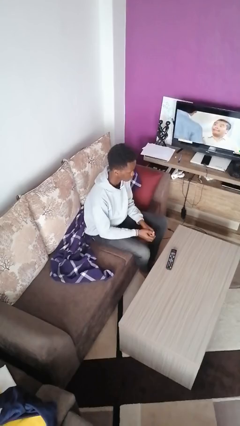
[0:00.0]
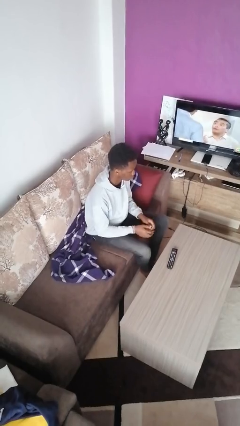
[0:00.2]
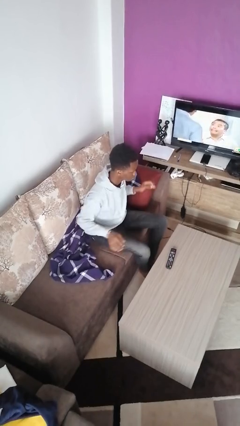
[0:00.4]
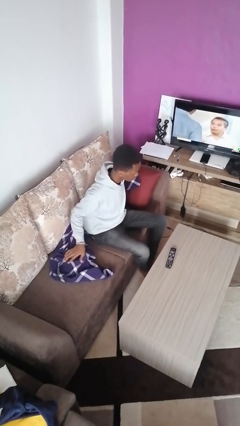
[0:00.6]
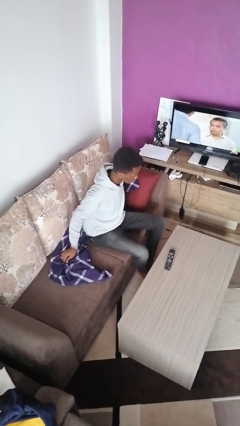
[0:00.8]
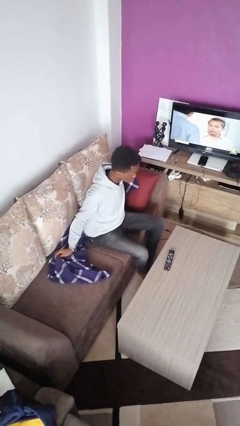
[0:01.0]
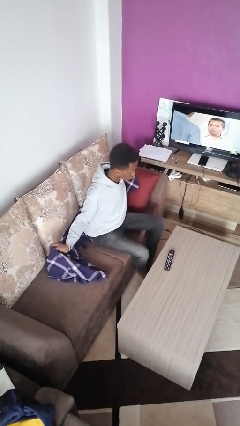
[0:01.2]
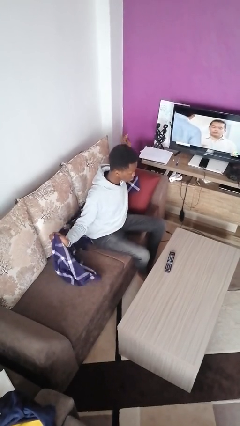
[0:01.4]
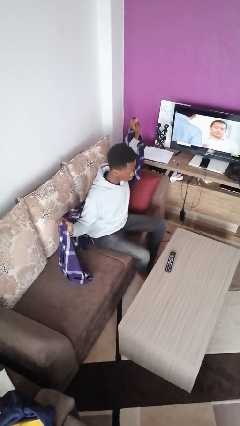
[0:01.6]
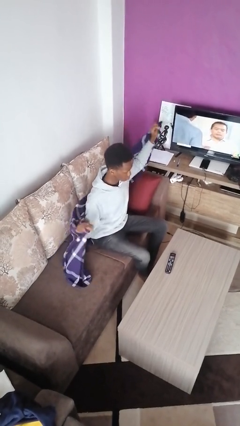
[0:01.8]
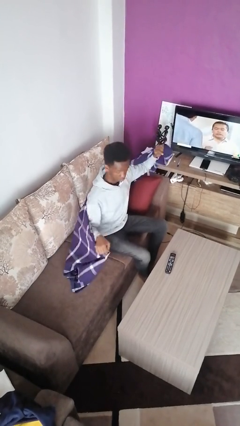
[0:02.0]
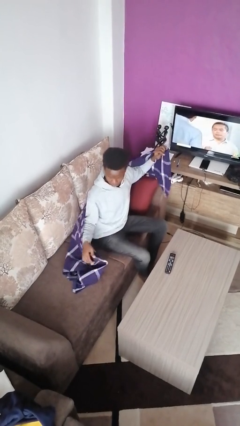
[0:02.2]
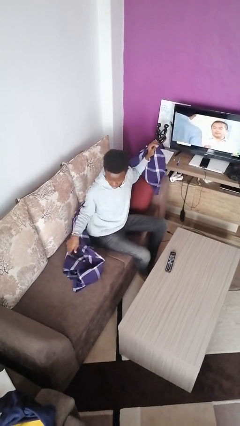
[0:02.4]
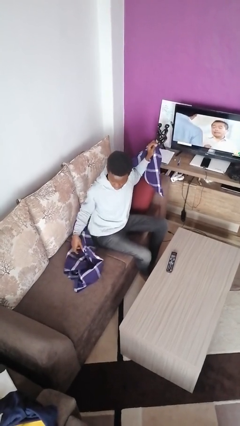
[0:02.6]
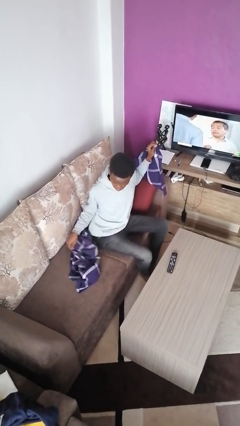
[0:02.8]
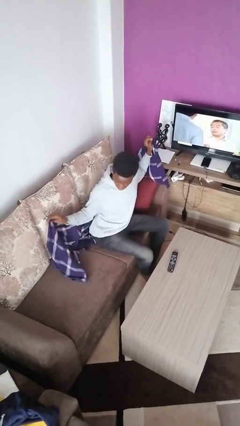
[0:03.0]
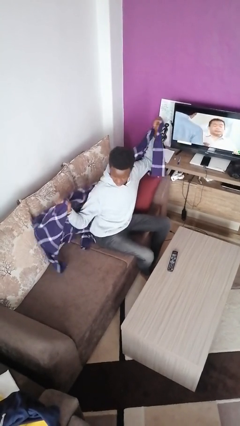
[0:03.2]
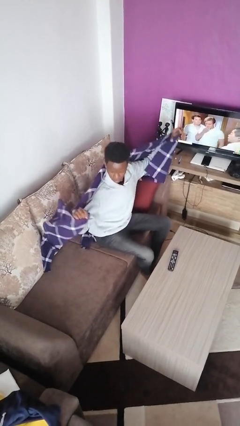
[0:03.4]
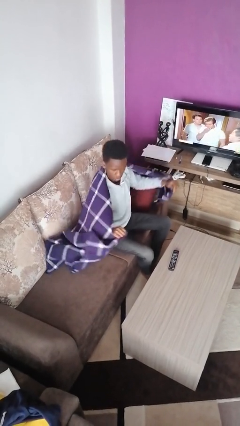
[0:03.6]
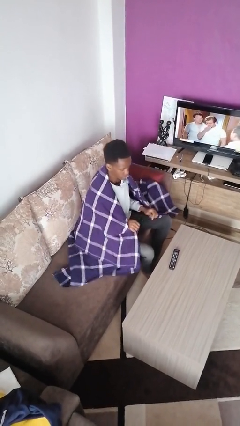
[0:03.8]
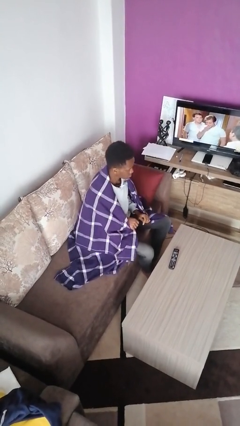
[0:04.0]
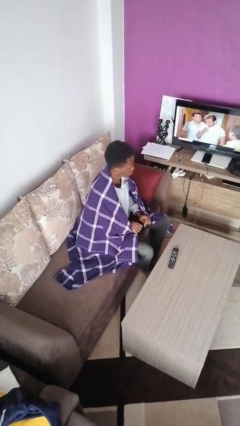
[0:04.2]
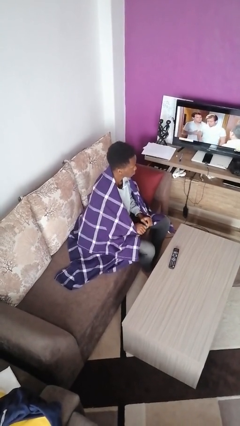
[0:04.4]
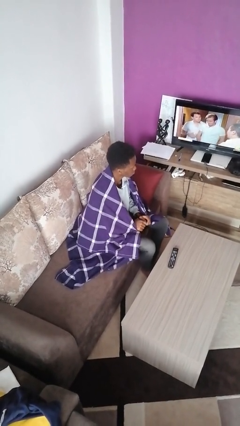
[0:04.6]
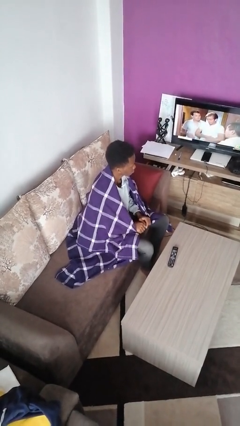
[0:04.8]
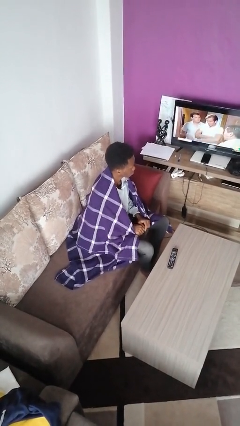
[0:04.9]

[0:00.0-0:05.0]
person covers with blanket

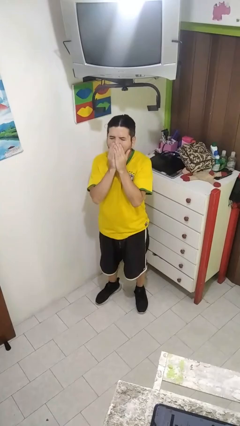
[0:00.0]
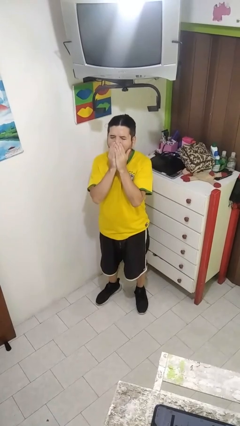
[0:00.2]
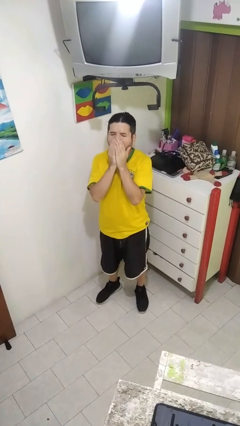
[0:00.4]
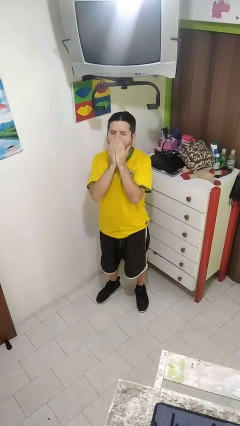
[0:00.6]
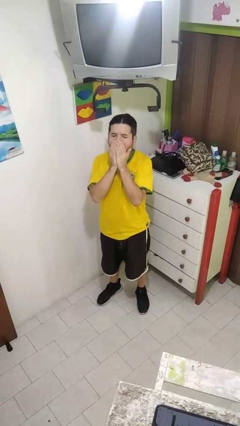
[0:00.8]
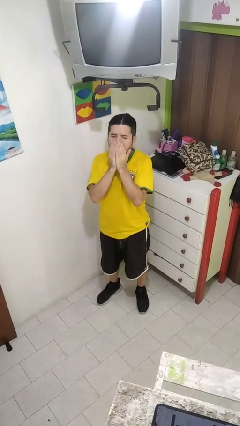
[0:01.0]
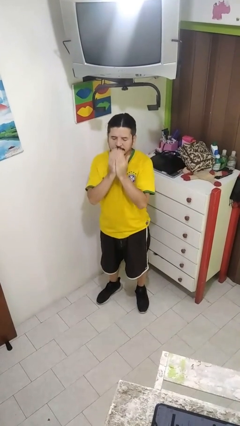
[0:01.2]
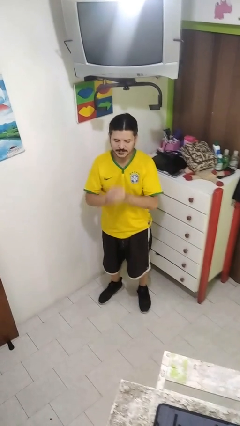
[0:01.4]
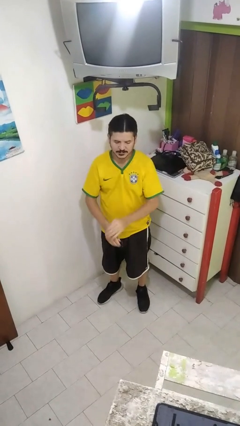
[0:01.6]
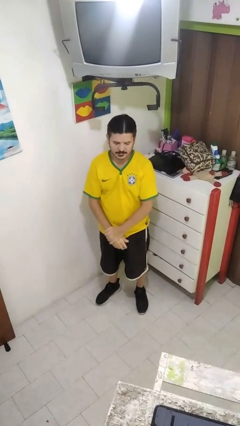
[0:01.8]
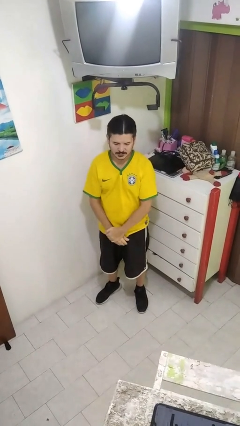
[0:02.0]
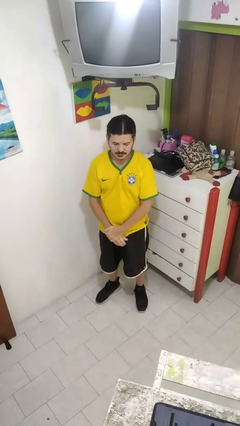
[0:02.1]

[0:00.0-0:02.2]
person yawns

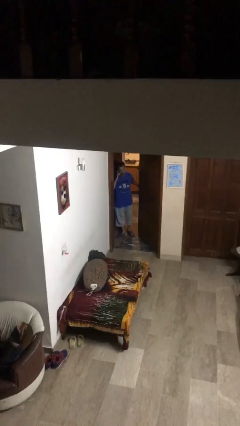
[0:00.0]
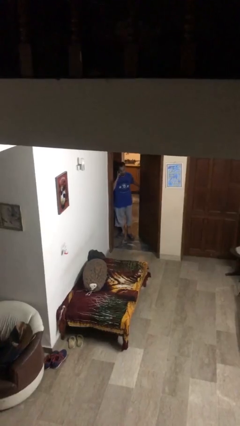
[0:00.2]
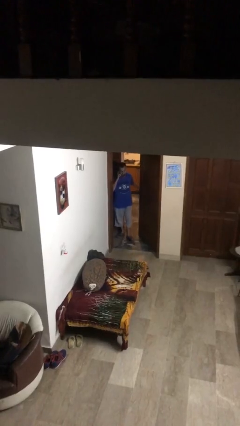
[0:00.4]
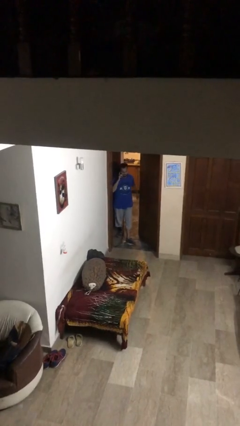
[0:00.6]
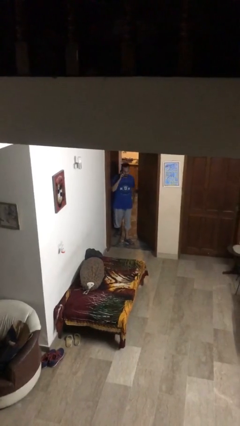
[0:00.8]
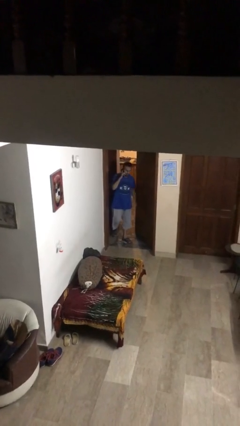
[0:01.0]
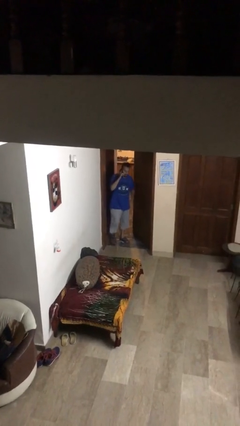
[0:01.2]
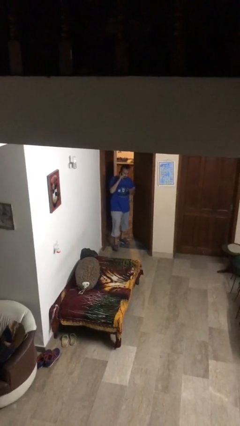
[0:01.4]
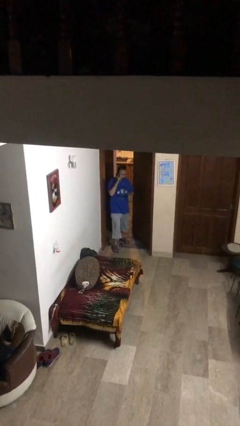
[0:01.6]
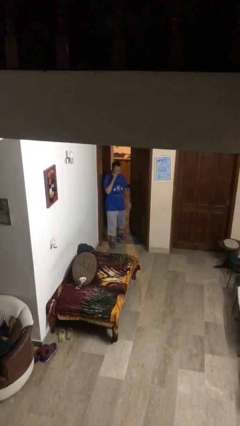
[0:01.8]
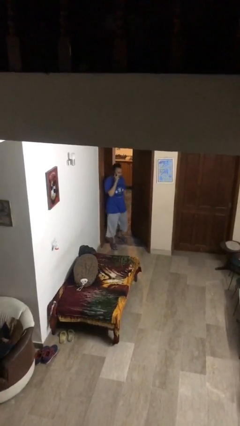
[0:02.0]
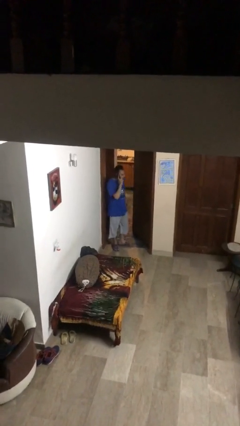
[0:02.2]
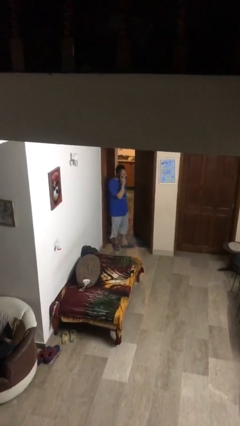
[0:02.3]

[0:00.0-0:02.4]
person enters scene through structure

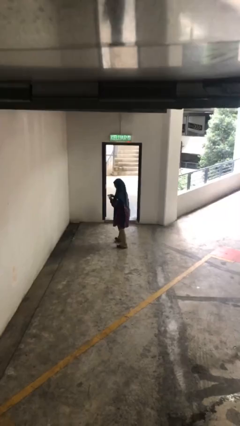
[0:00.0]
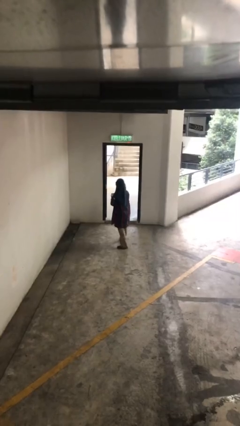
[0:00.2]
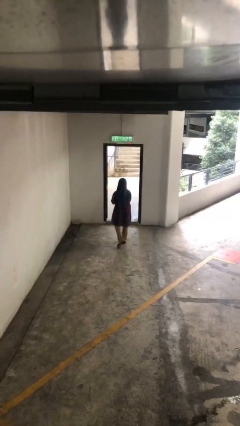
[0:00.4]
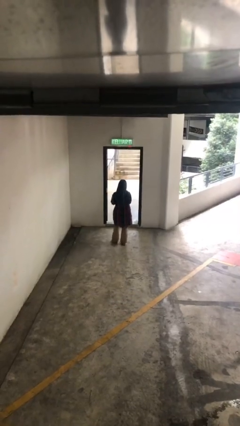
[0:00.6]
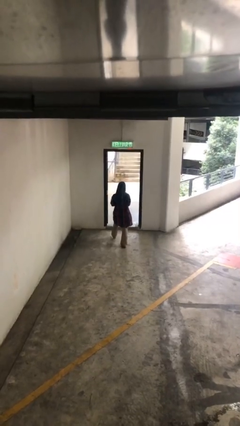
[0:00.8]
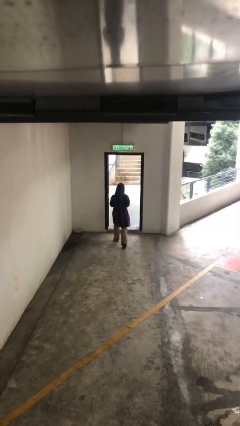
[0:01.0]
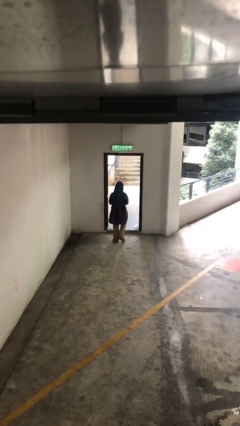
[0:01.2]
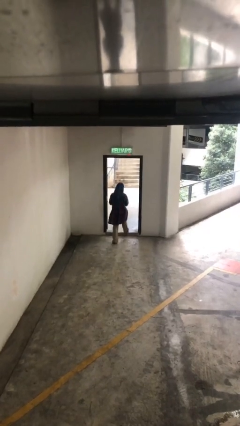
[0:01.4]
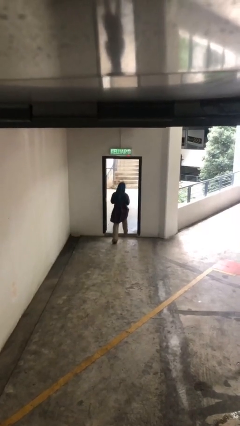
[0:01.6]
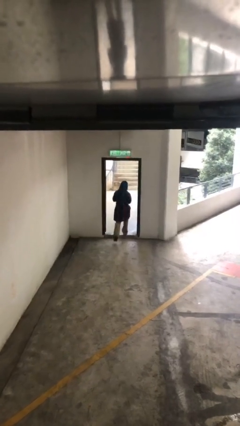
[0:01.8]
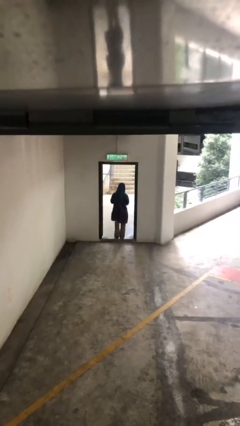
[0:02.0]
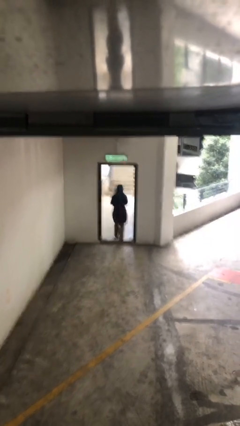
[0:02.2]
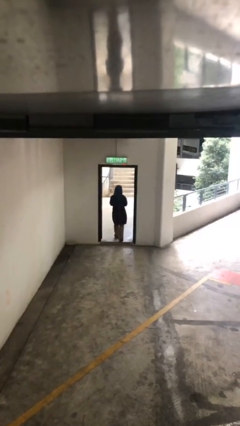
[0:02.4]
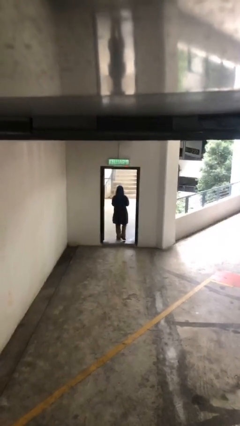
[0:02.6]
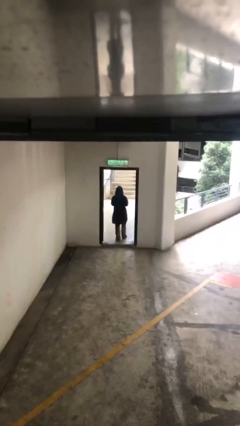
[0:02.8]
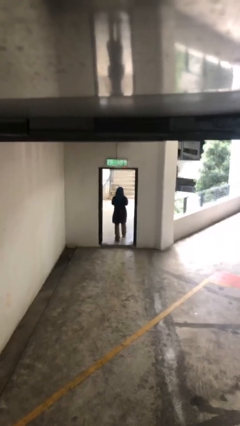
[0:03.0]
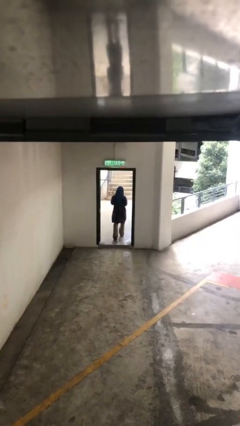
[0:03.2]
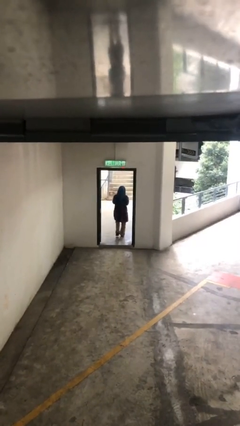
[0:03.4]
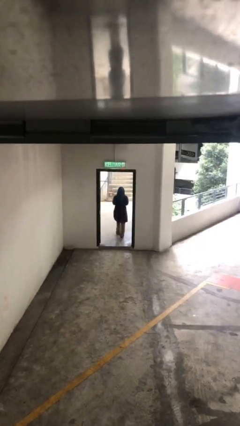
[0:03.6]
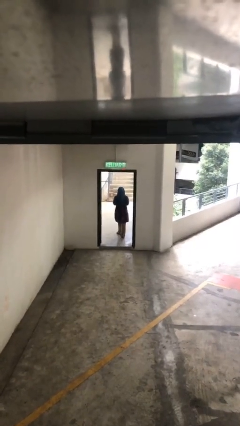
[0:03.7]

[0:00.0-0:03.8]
person exits scene through structure

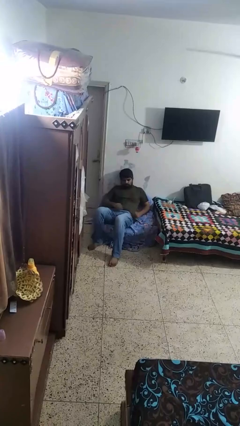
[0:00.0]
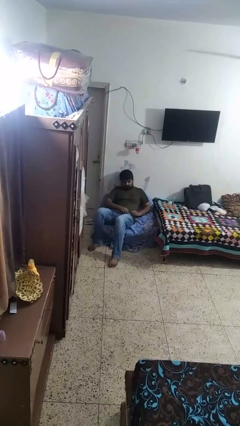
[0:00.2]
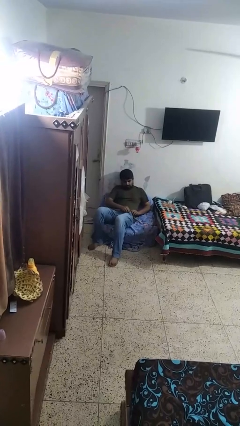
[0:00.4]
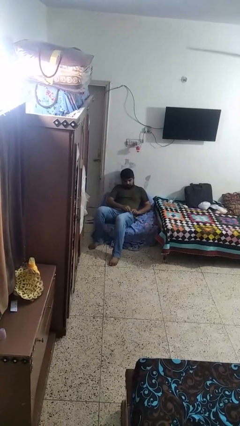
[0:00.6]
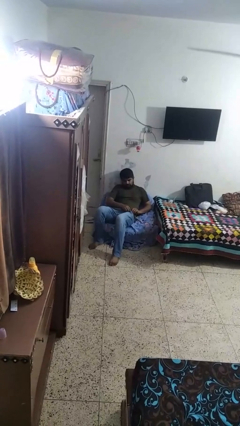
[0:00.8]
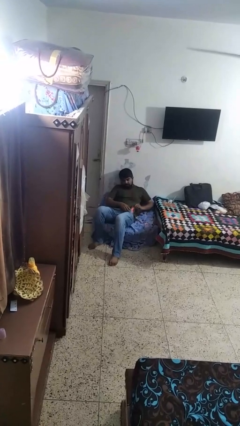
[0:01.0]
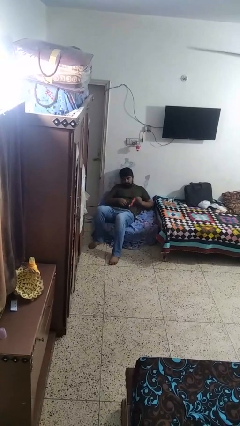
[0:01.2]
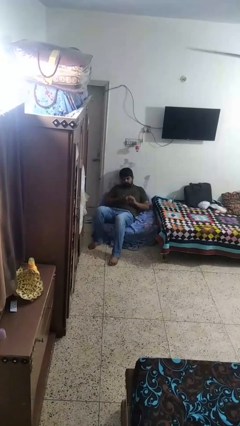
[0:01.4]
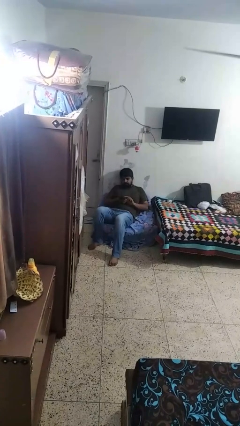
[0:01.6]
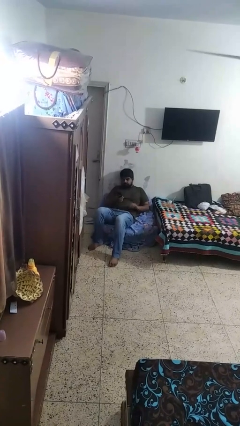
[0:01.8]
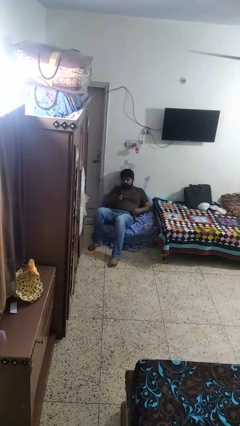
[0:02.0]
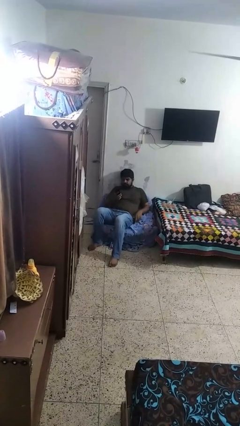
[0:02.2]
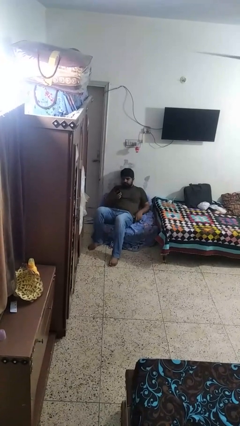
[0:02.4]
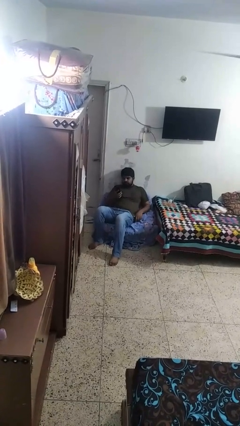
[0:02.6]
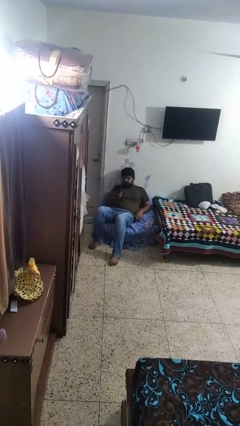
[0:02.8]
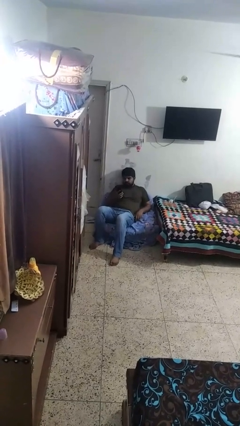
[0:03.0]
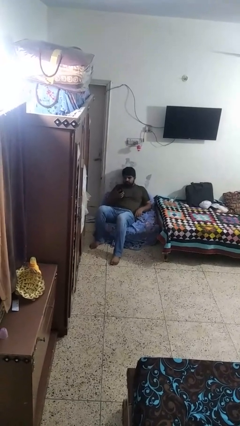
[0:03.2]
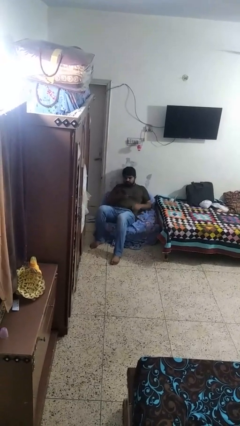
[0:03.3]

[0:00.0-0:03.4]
person takes phone from pocket

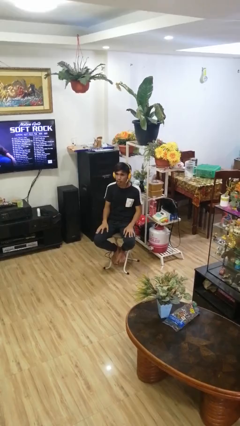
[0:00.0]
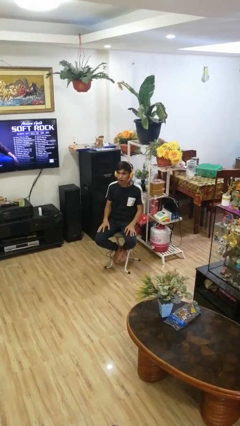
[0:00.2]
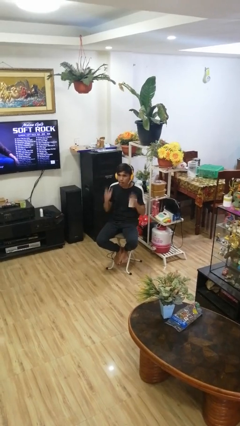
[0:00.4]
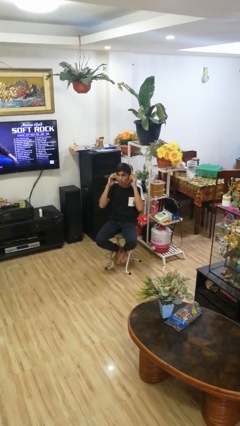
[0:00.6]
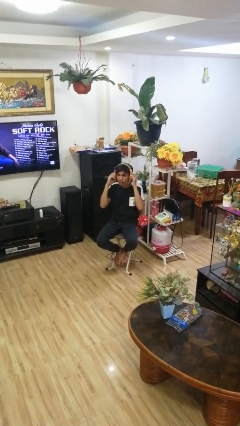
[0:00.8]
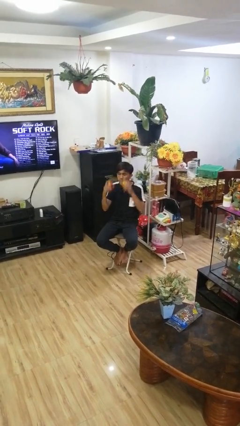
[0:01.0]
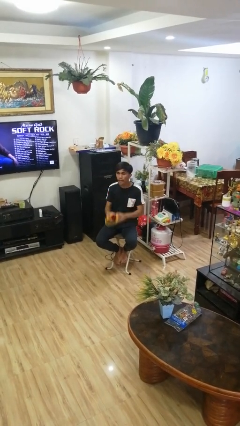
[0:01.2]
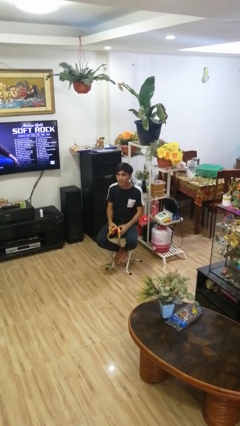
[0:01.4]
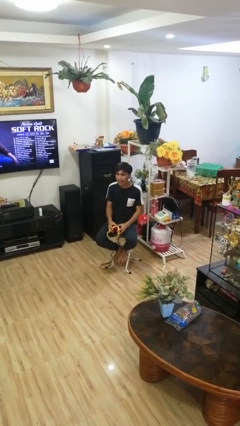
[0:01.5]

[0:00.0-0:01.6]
person takes off headphones
